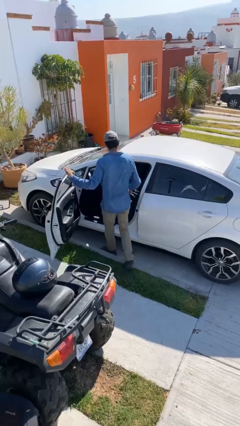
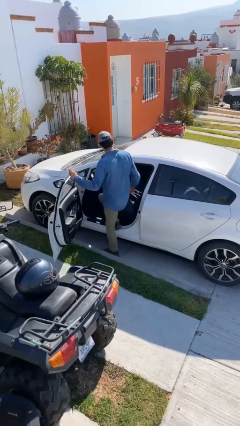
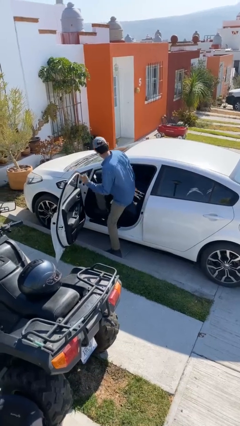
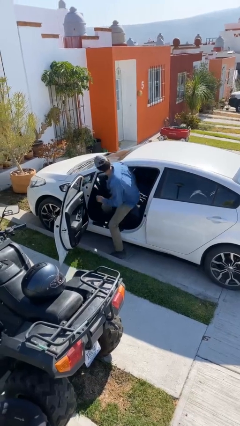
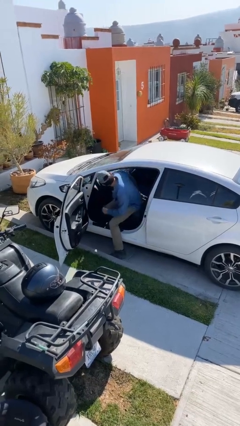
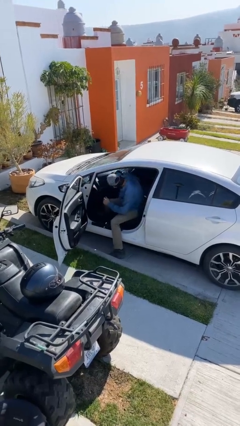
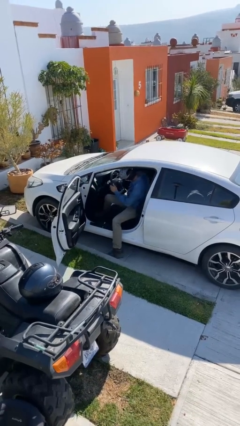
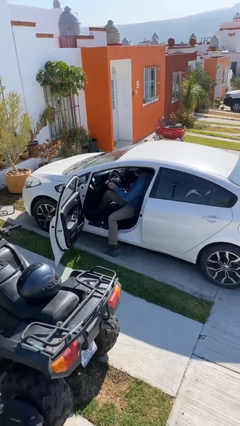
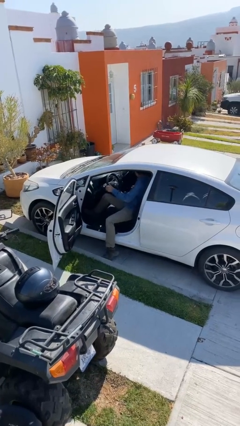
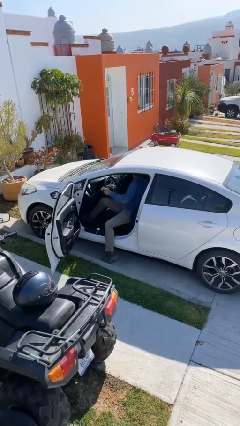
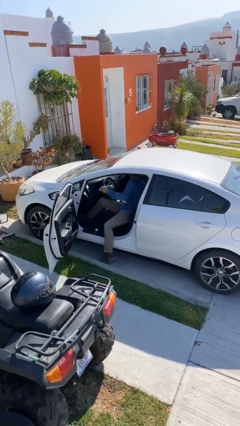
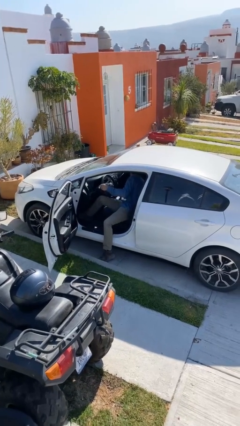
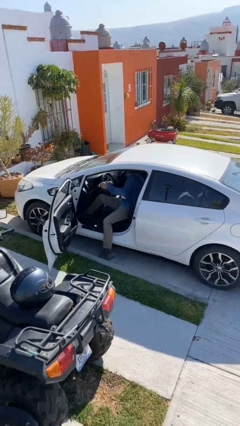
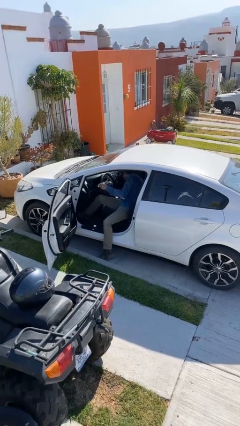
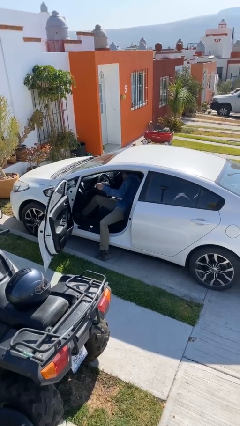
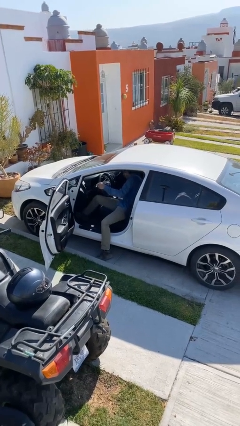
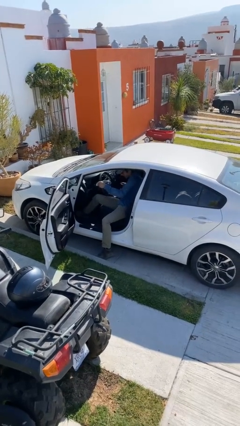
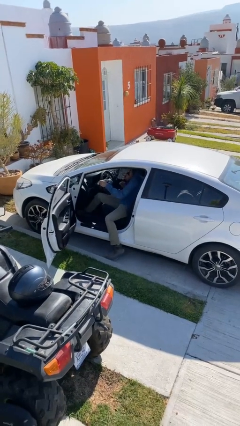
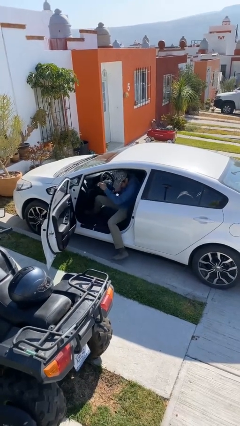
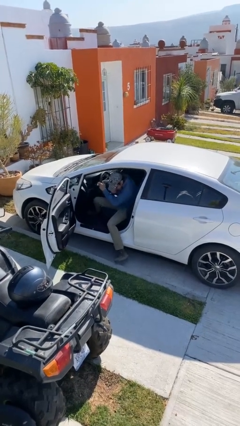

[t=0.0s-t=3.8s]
person enters car

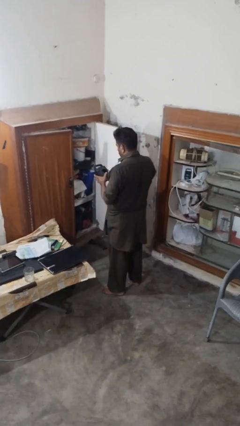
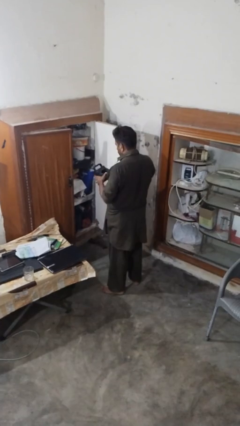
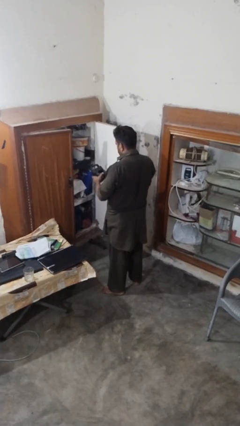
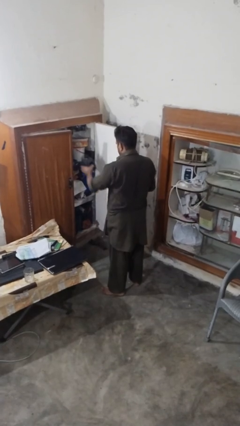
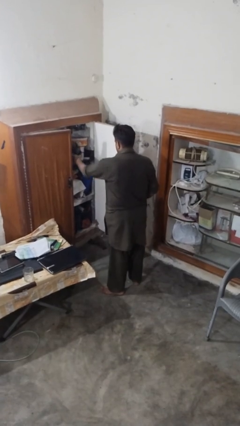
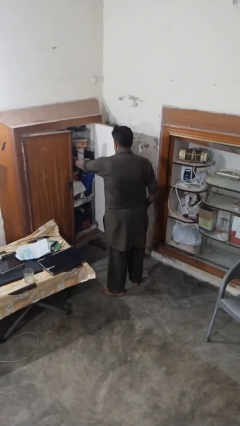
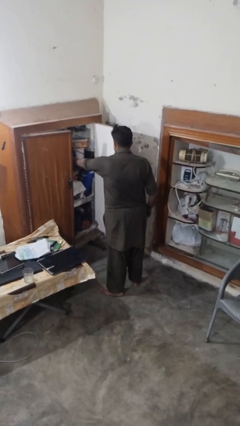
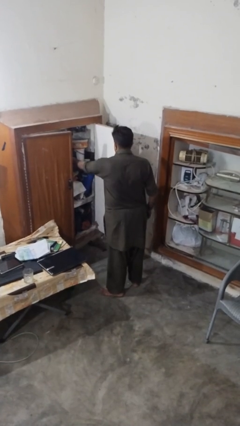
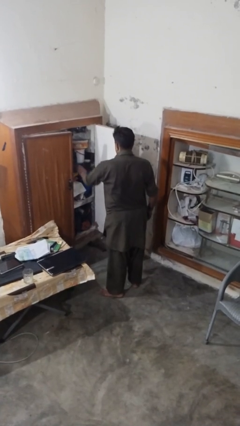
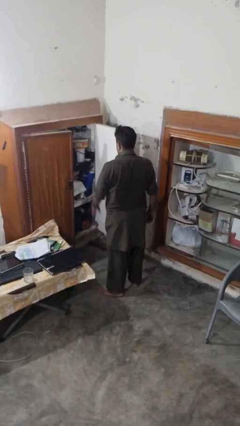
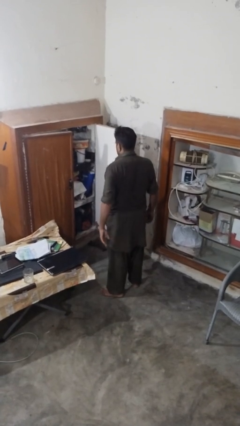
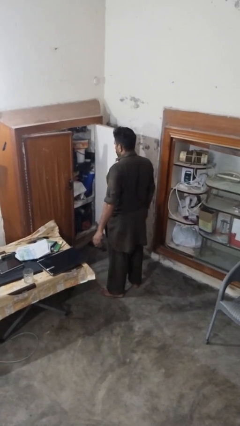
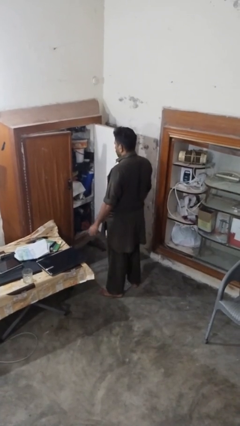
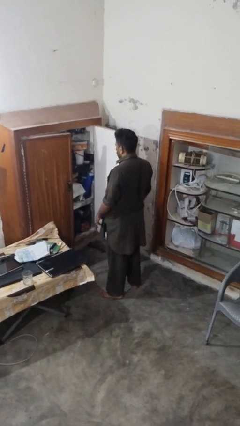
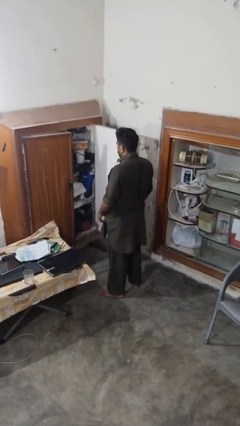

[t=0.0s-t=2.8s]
person puts down object into cabinet

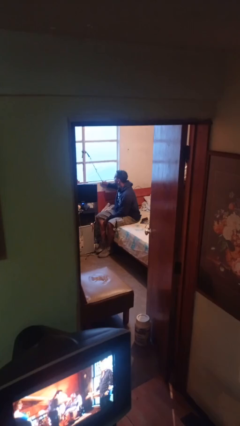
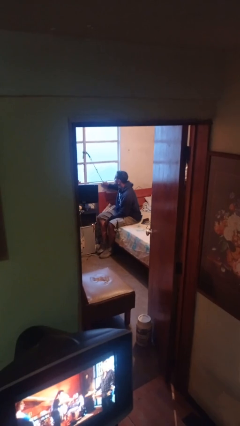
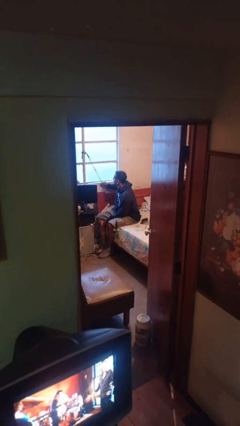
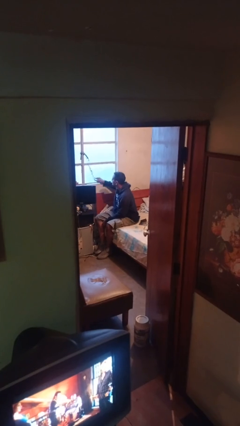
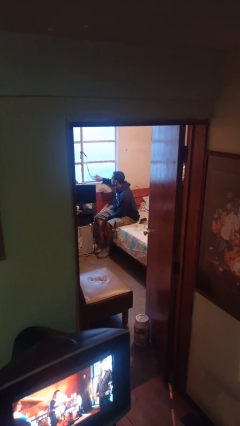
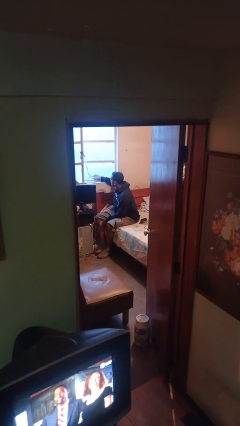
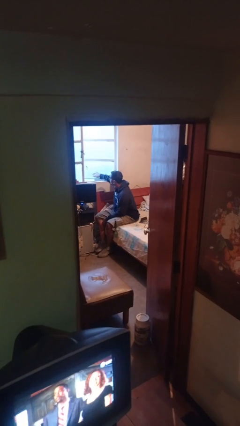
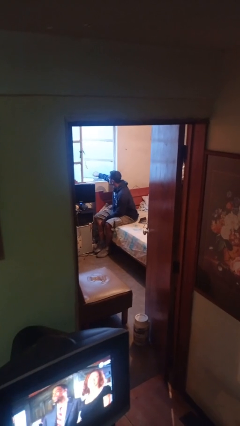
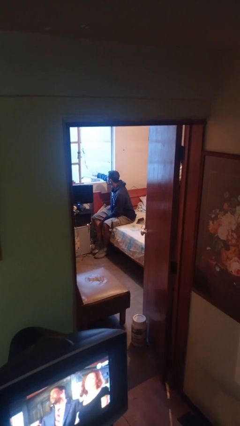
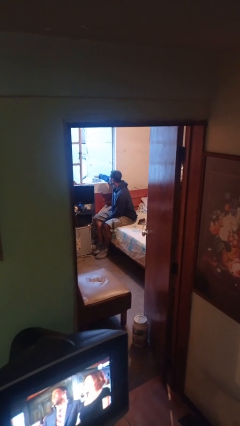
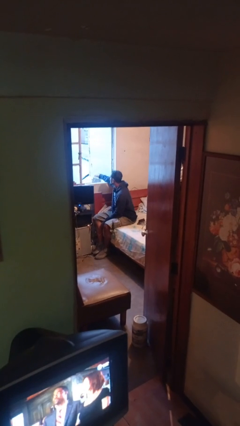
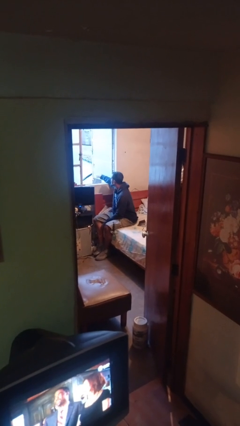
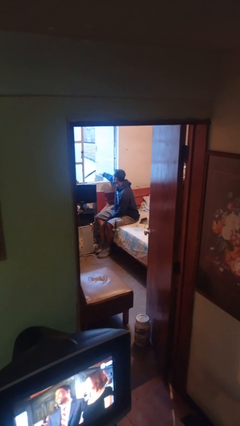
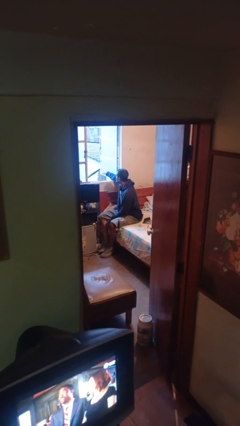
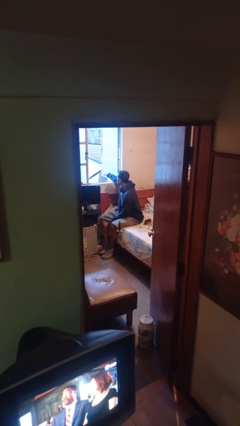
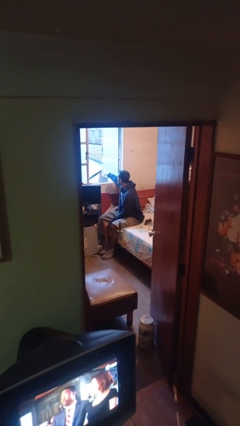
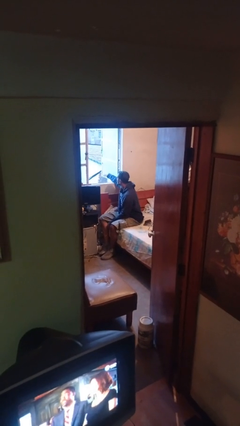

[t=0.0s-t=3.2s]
person opens home window

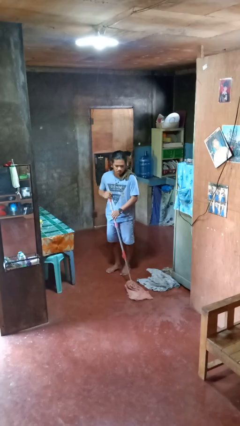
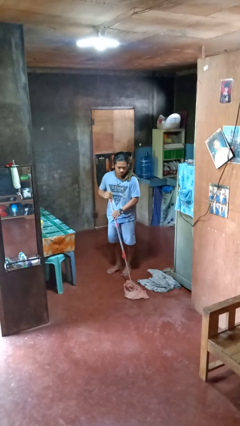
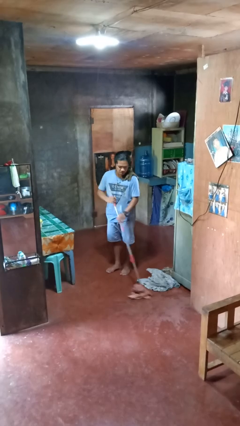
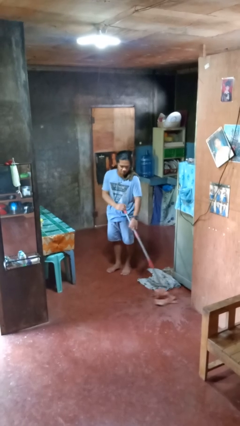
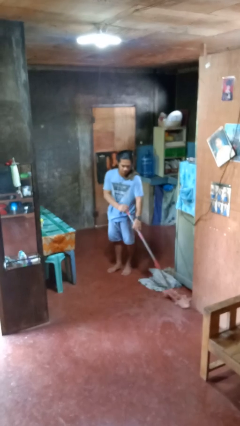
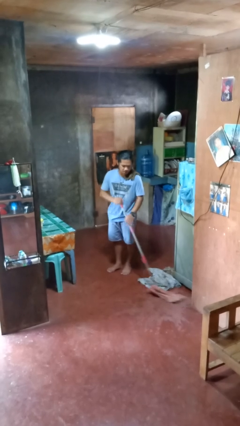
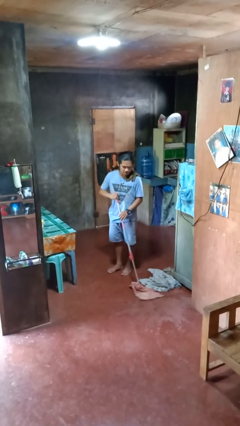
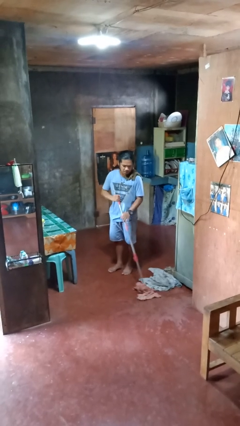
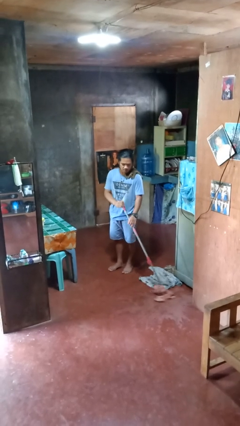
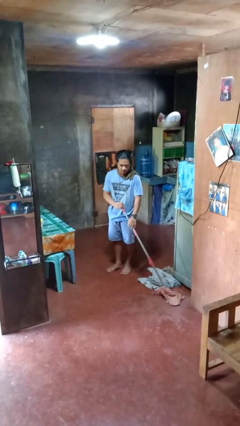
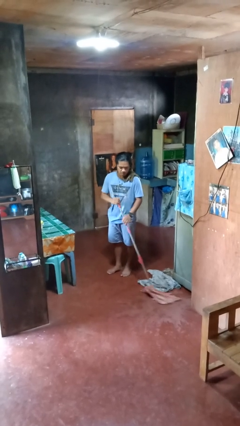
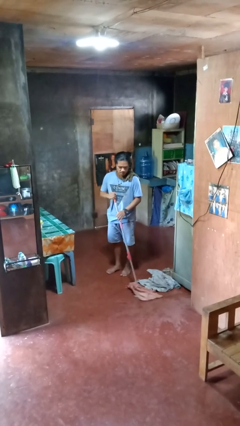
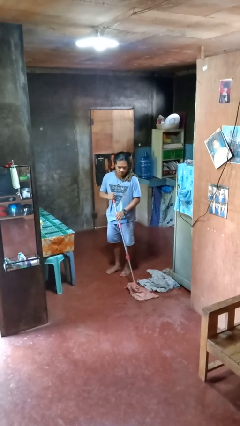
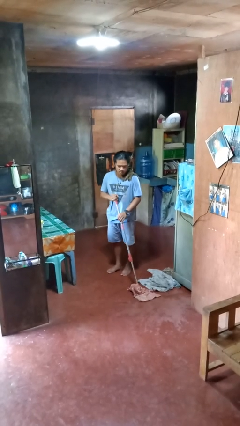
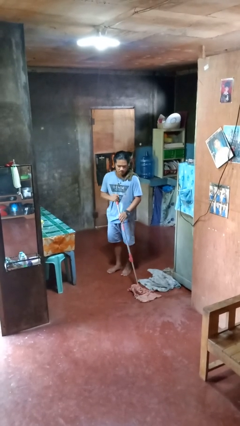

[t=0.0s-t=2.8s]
person mops

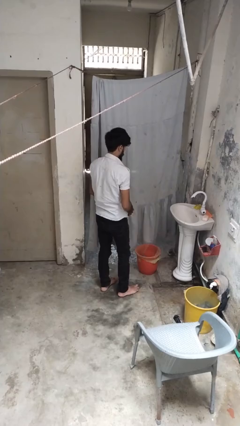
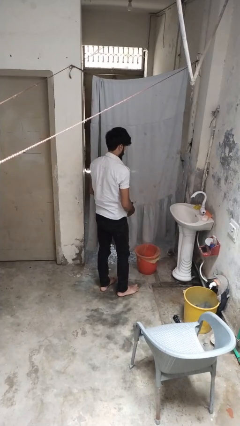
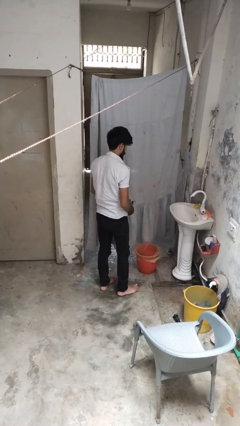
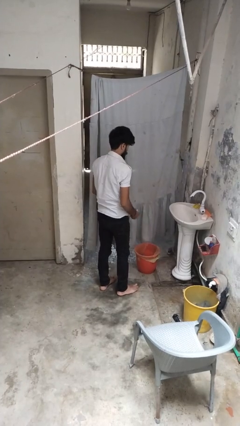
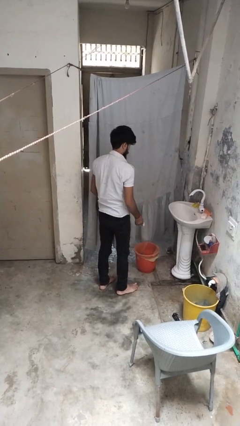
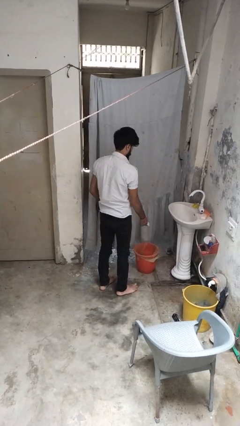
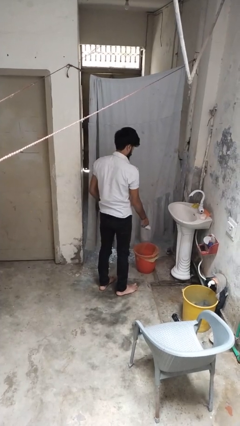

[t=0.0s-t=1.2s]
person discards trash

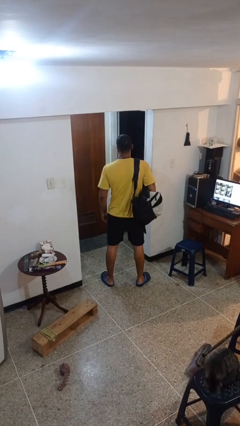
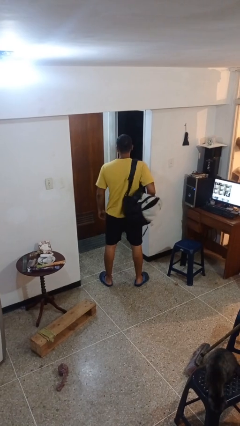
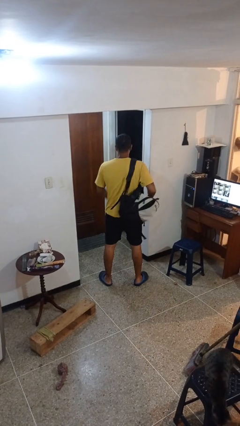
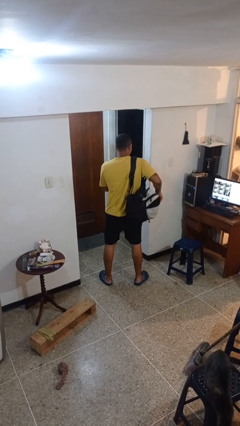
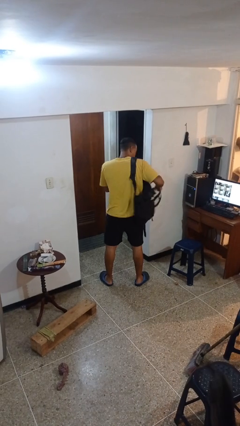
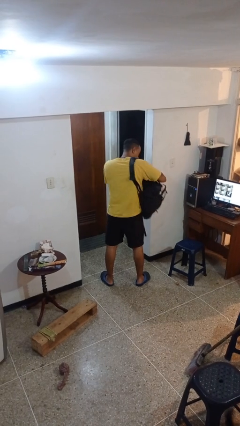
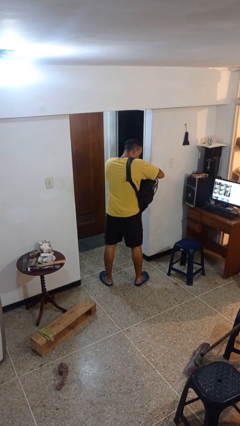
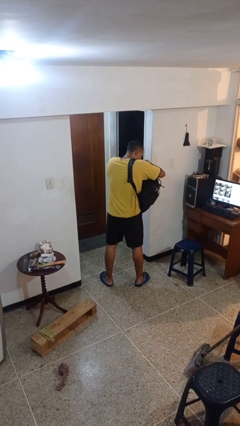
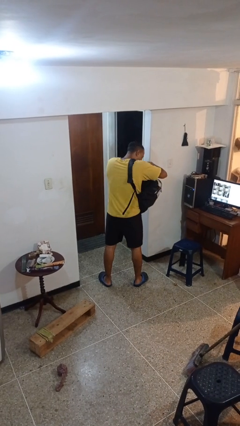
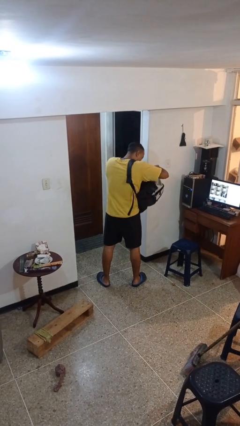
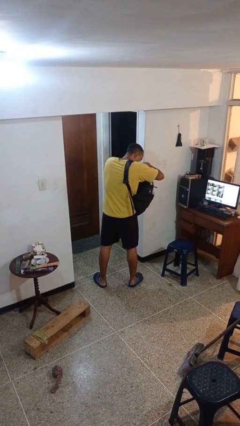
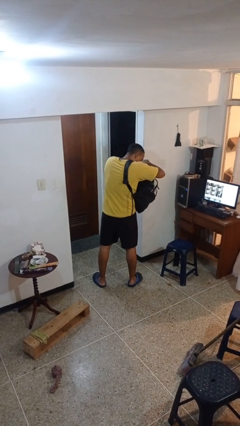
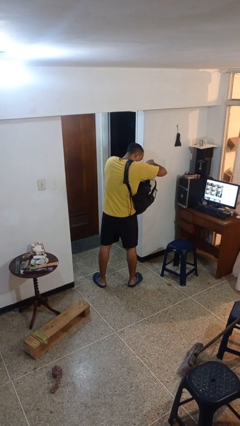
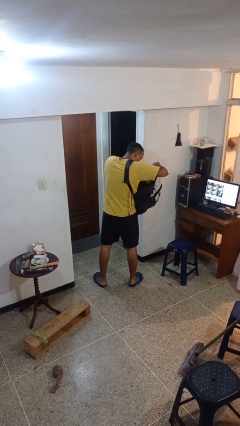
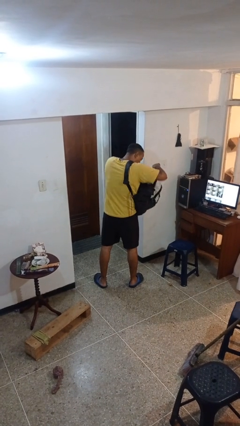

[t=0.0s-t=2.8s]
person searches in backpack

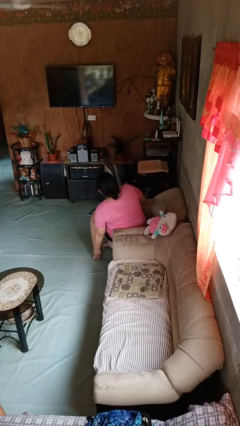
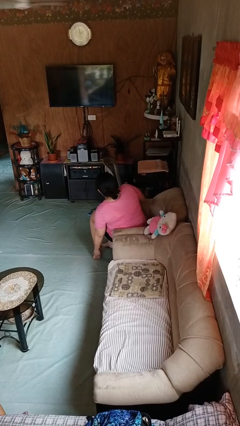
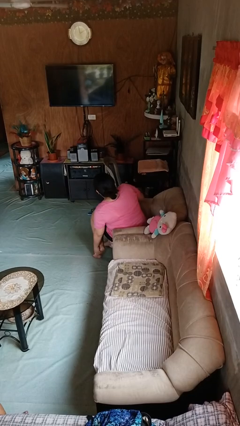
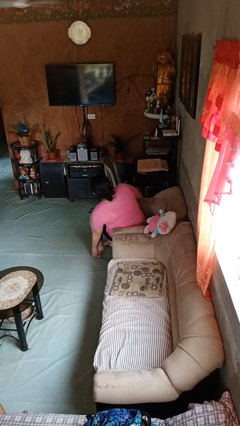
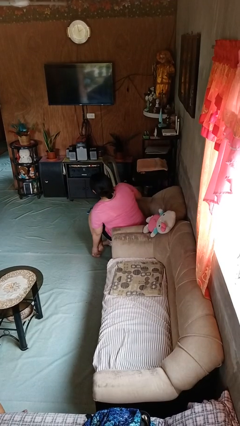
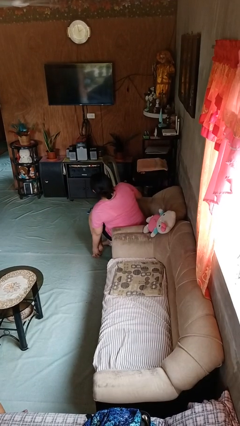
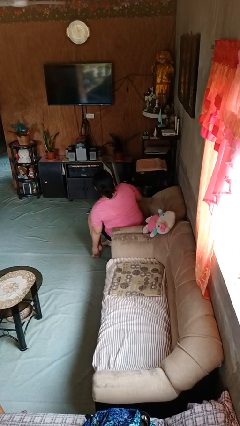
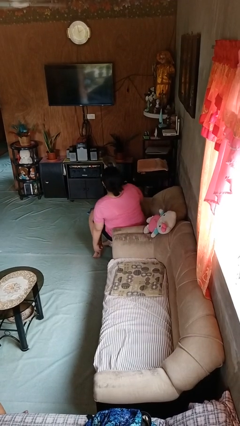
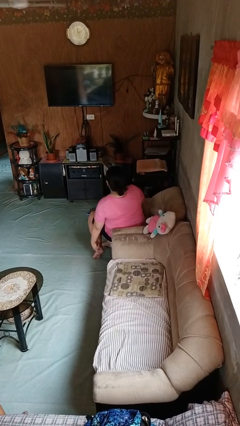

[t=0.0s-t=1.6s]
person rubs foot
